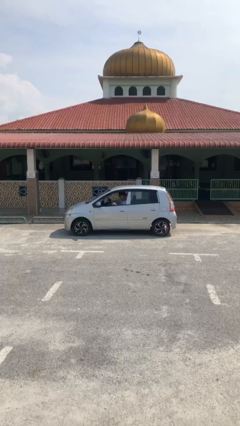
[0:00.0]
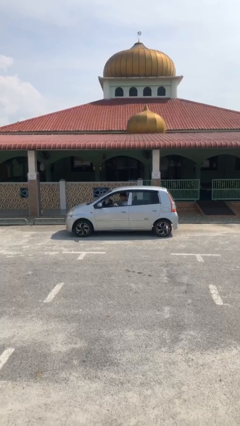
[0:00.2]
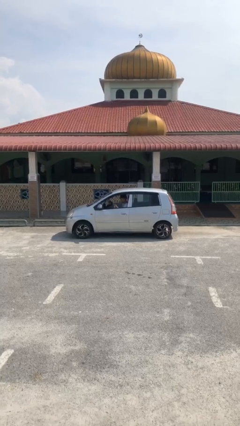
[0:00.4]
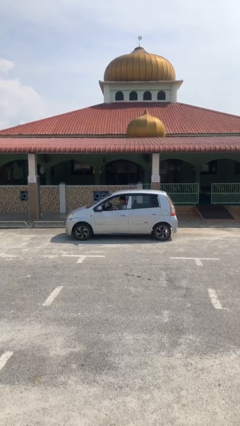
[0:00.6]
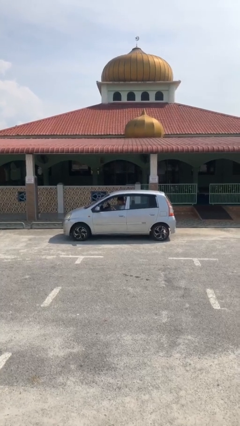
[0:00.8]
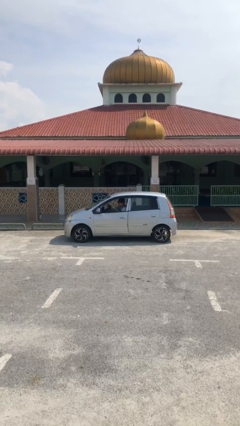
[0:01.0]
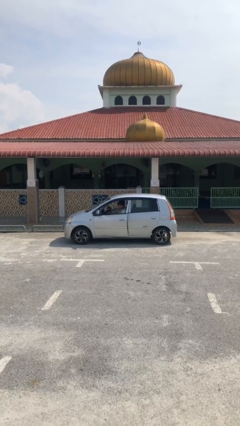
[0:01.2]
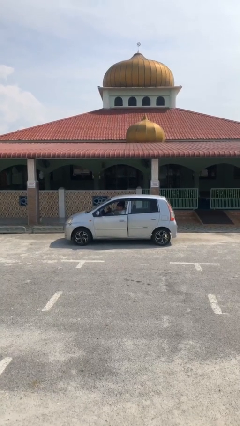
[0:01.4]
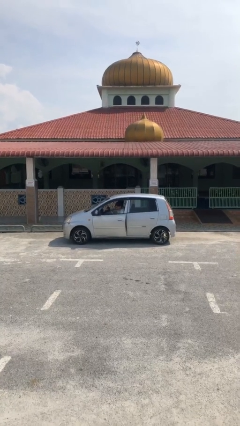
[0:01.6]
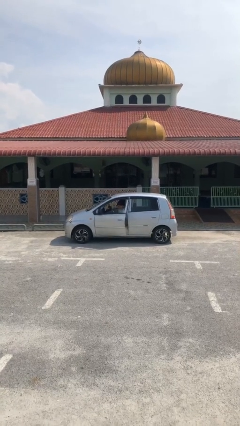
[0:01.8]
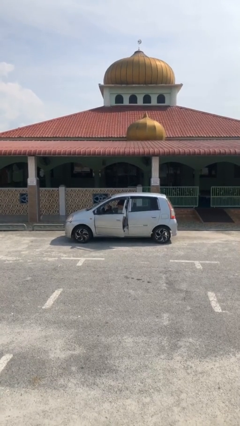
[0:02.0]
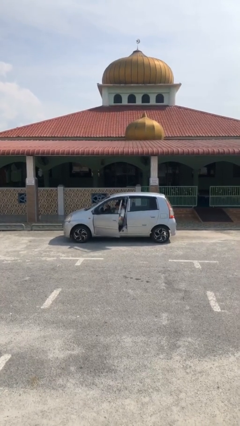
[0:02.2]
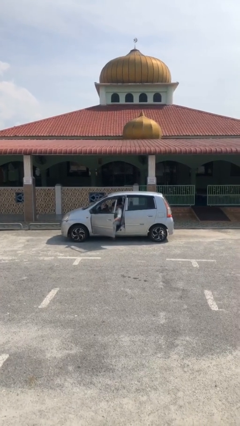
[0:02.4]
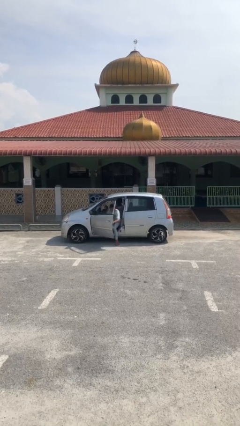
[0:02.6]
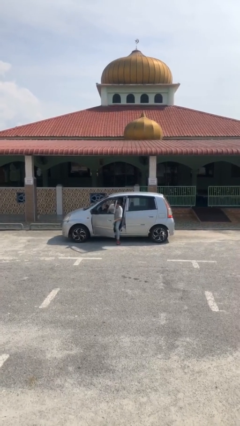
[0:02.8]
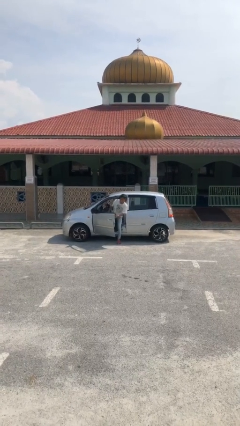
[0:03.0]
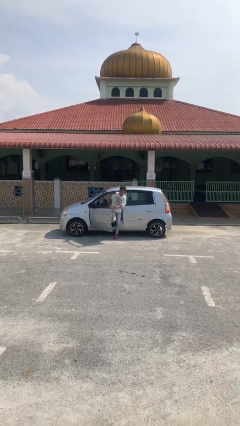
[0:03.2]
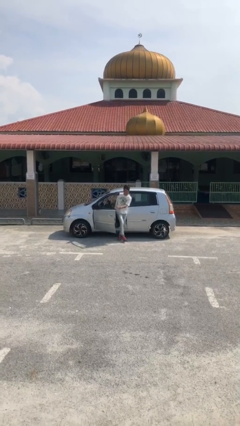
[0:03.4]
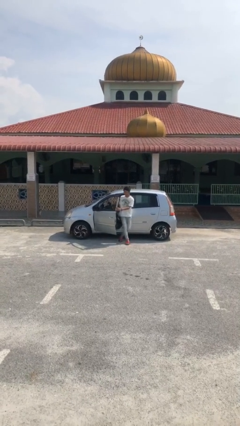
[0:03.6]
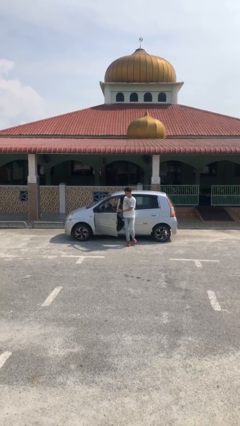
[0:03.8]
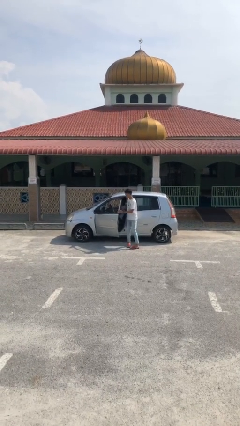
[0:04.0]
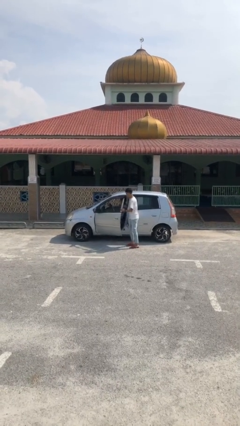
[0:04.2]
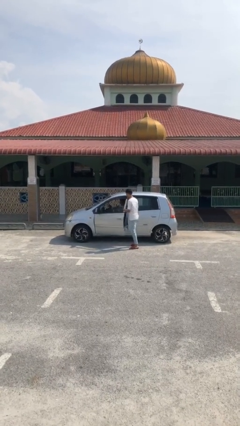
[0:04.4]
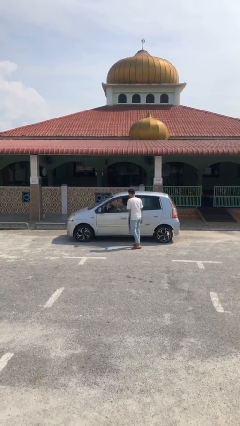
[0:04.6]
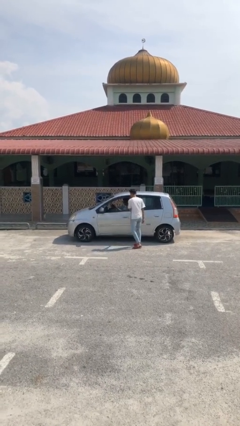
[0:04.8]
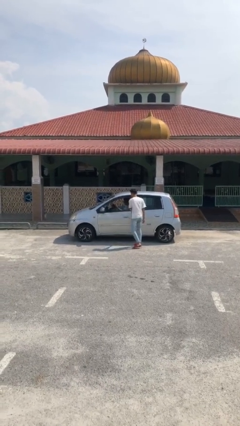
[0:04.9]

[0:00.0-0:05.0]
car drops off person

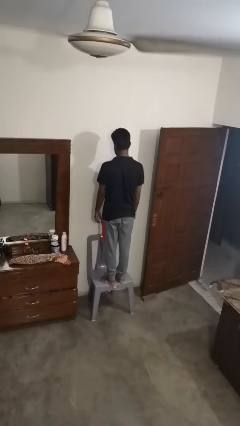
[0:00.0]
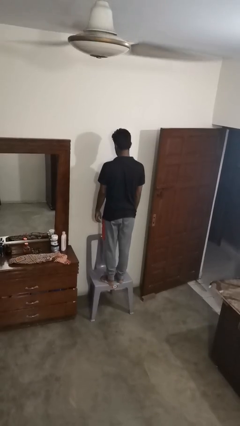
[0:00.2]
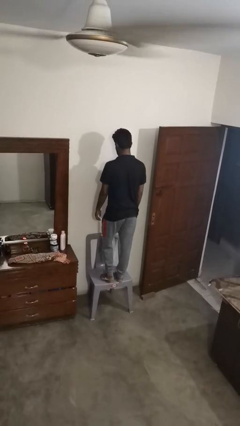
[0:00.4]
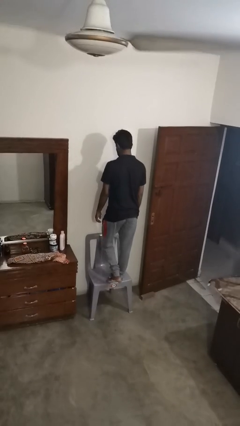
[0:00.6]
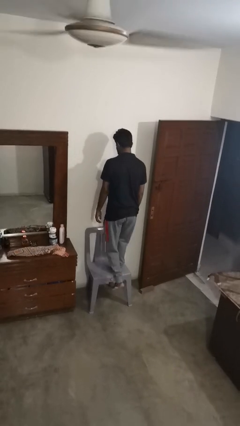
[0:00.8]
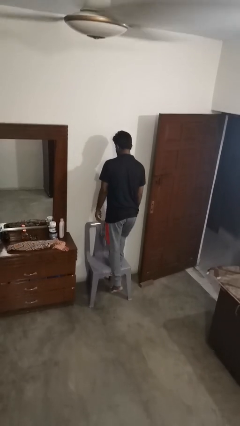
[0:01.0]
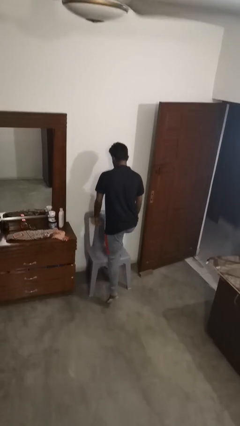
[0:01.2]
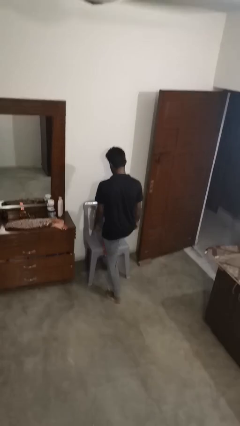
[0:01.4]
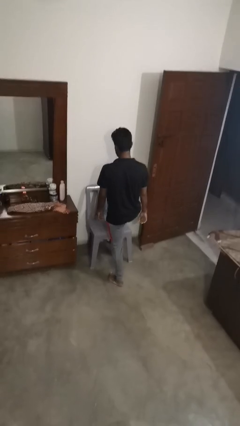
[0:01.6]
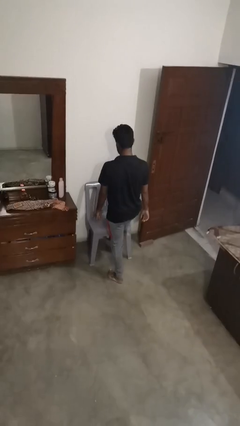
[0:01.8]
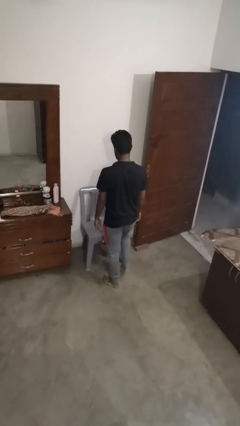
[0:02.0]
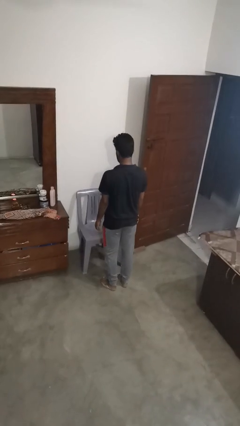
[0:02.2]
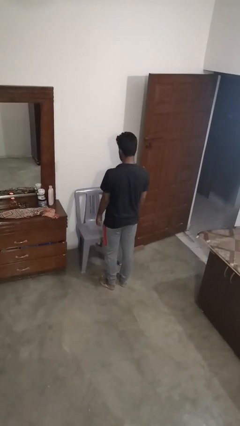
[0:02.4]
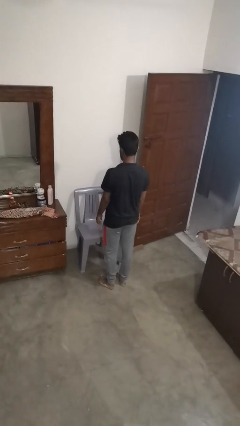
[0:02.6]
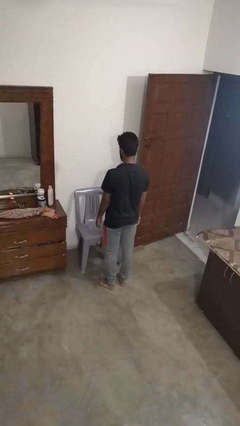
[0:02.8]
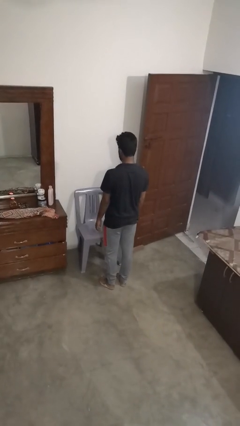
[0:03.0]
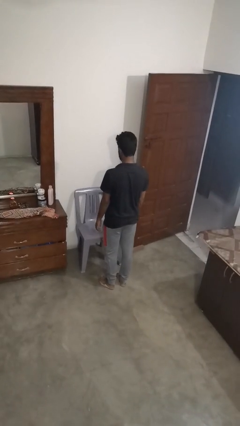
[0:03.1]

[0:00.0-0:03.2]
person climbs off chair

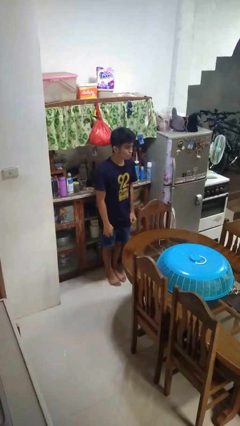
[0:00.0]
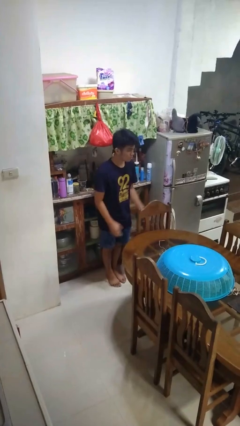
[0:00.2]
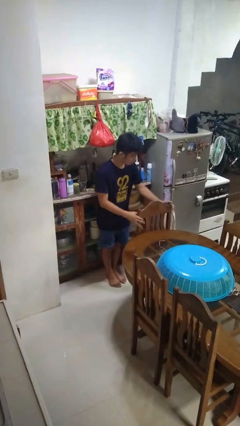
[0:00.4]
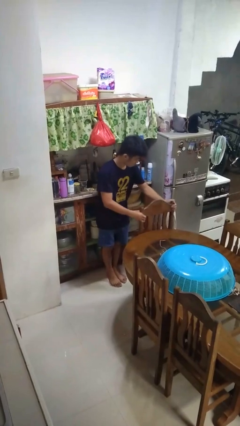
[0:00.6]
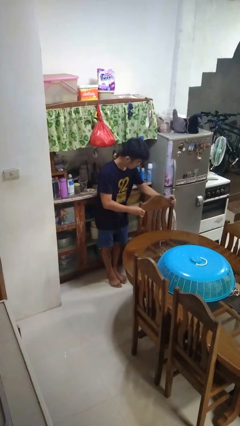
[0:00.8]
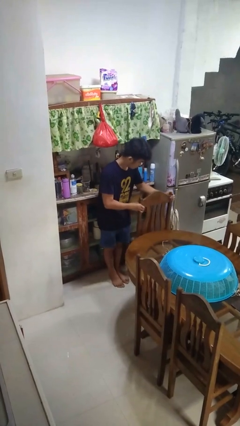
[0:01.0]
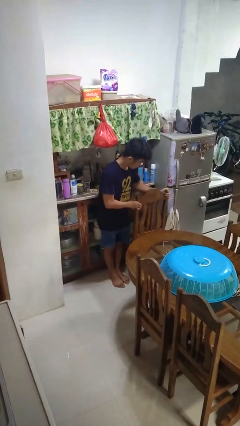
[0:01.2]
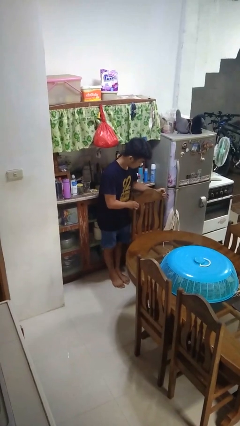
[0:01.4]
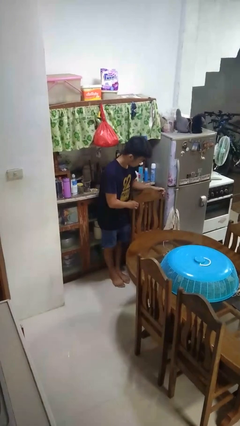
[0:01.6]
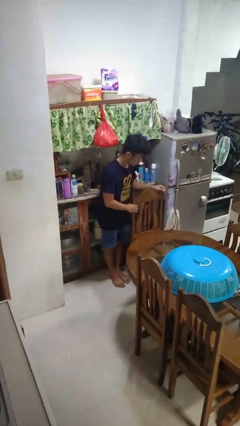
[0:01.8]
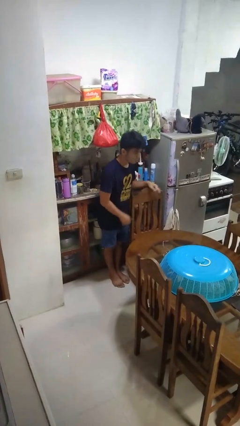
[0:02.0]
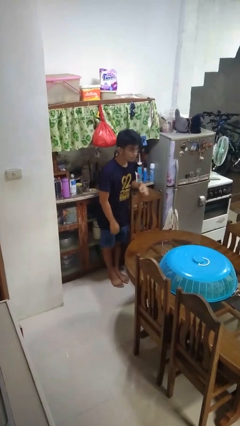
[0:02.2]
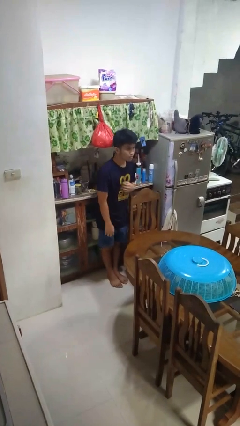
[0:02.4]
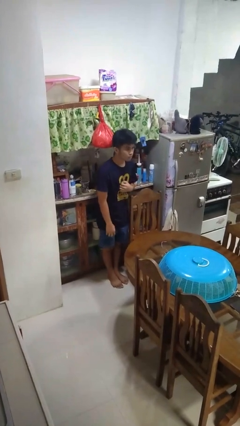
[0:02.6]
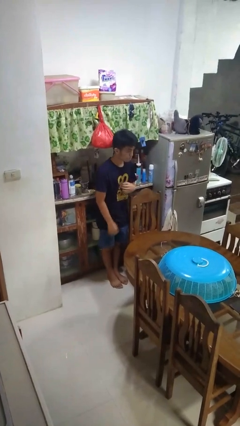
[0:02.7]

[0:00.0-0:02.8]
person pulls out chair

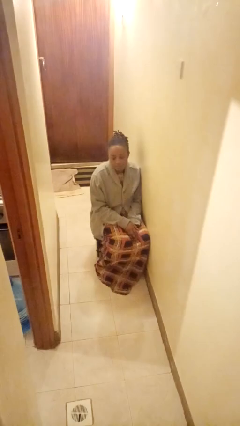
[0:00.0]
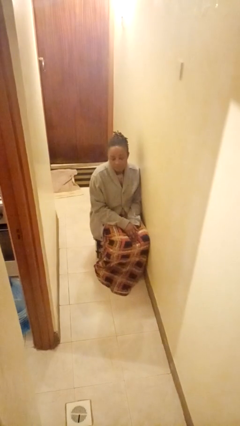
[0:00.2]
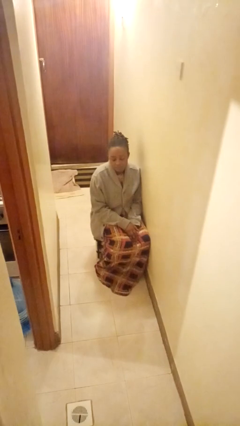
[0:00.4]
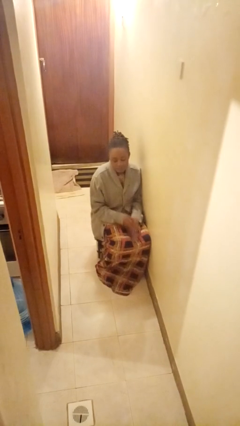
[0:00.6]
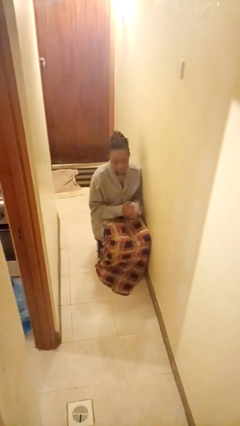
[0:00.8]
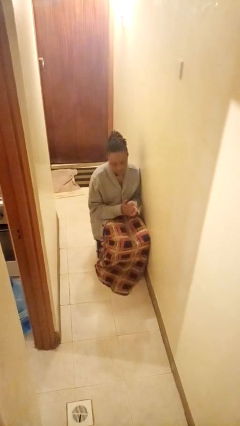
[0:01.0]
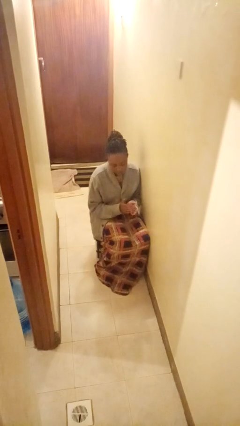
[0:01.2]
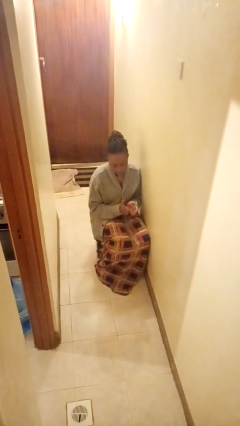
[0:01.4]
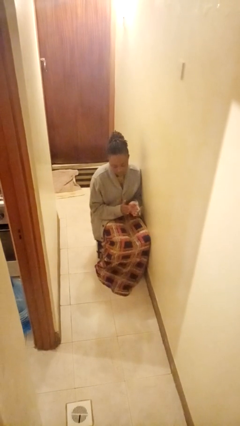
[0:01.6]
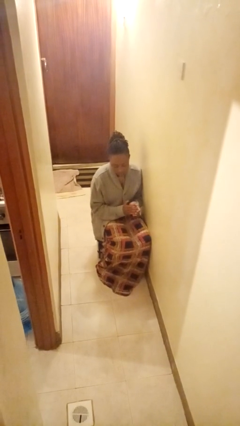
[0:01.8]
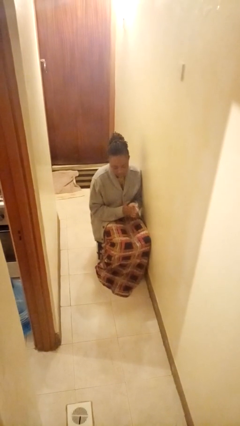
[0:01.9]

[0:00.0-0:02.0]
person claps hands

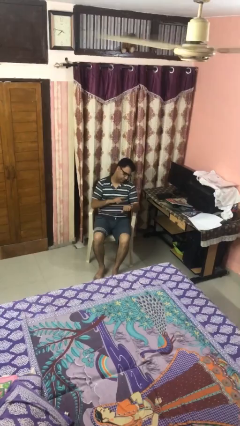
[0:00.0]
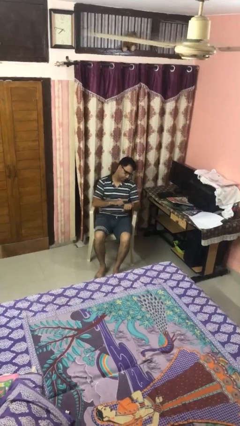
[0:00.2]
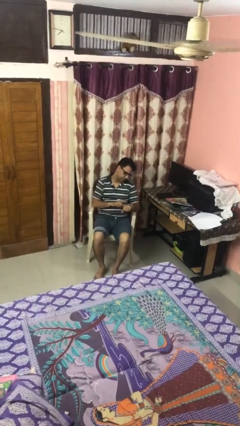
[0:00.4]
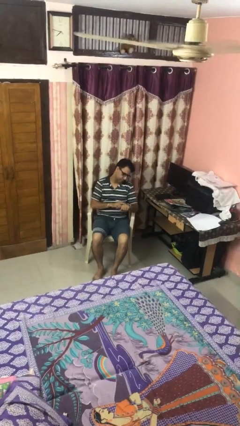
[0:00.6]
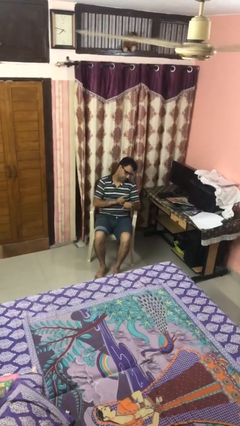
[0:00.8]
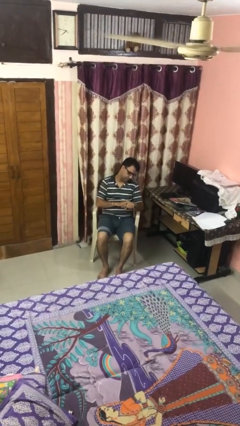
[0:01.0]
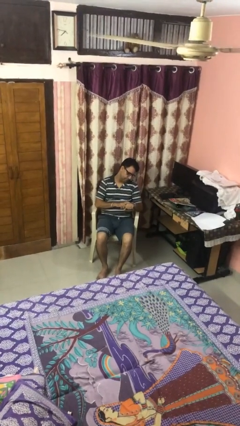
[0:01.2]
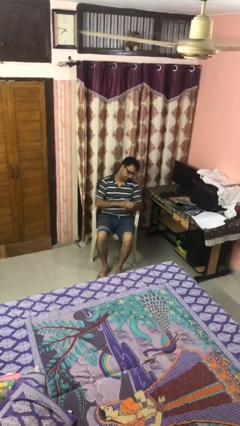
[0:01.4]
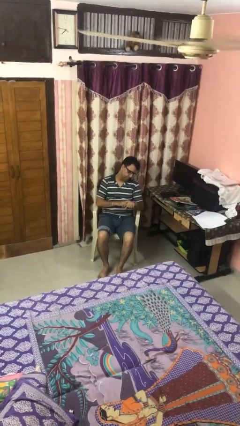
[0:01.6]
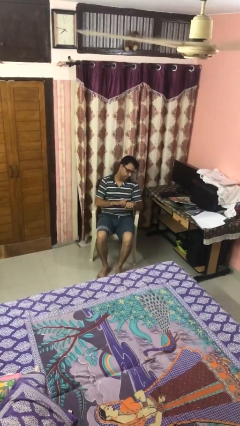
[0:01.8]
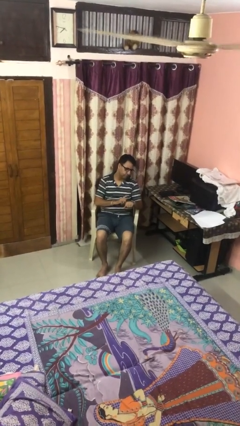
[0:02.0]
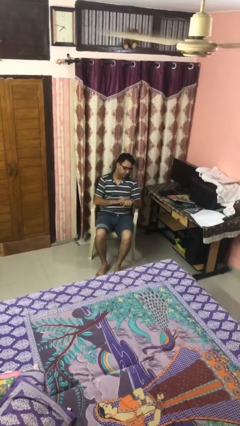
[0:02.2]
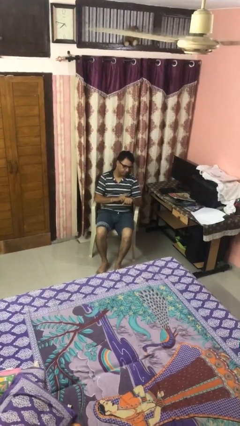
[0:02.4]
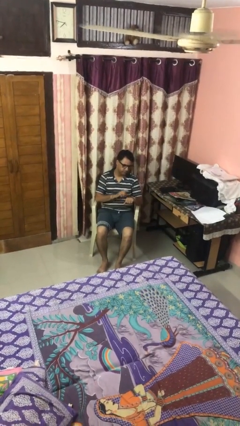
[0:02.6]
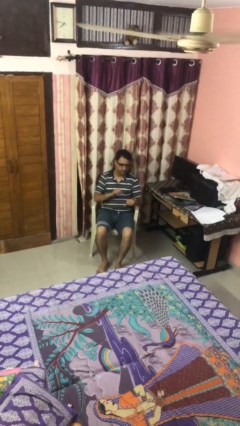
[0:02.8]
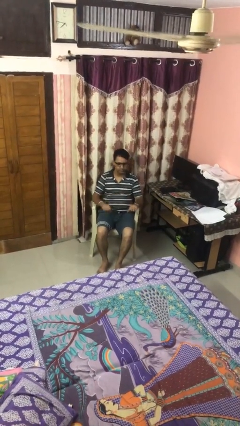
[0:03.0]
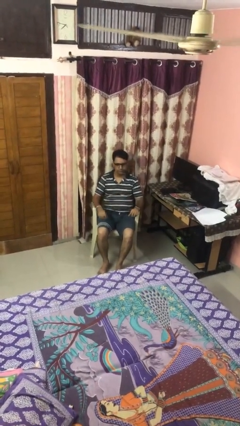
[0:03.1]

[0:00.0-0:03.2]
person looks at wristwatch

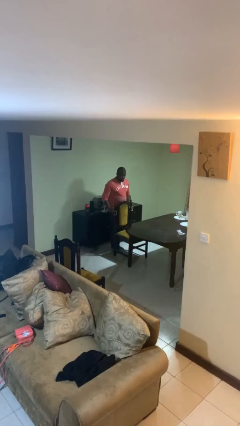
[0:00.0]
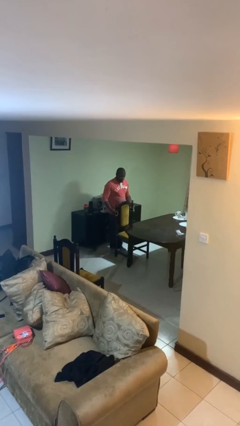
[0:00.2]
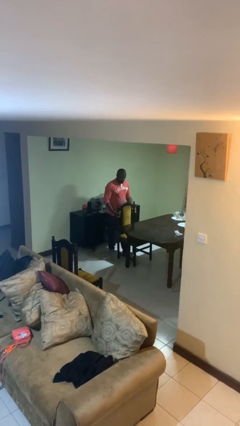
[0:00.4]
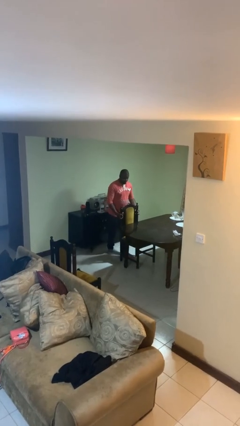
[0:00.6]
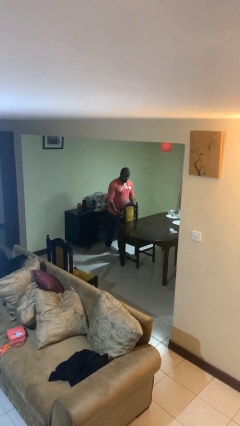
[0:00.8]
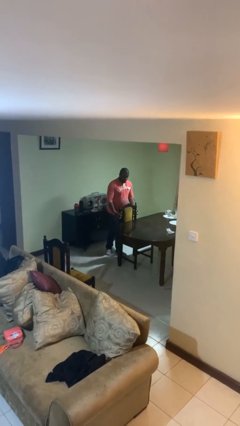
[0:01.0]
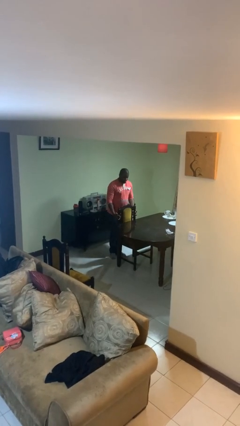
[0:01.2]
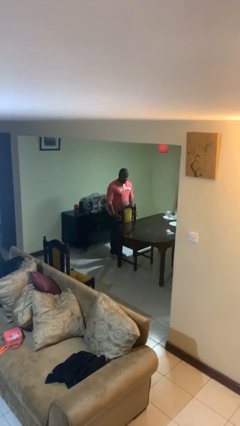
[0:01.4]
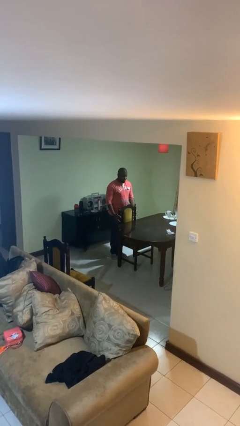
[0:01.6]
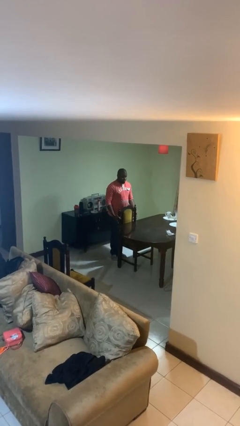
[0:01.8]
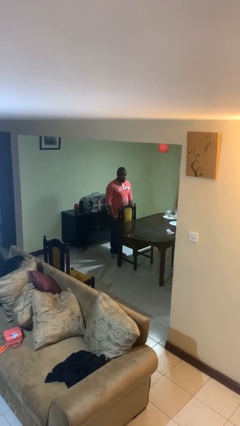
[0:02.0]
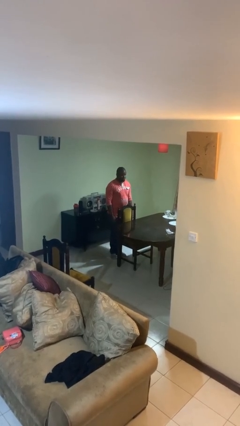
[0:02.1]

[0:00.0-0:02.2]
person pushes in chair
